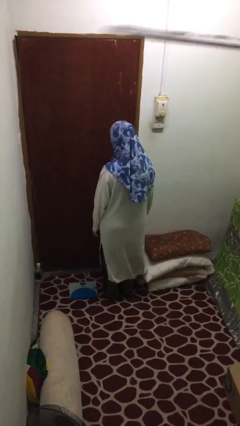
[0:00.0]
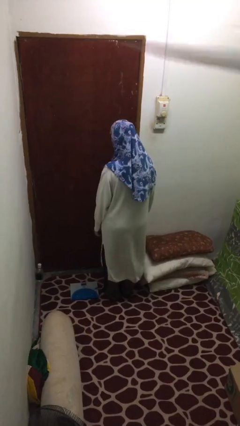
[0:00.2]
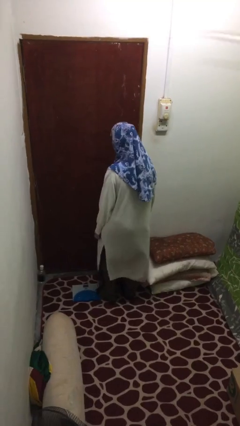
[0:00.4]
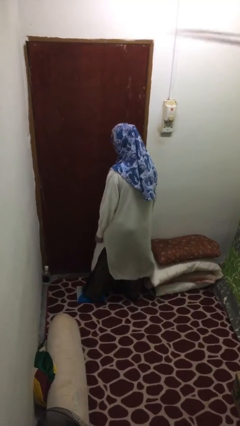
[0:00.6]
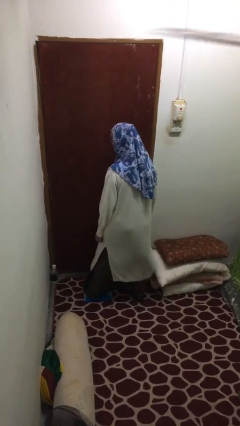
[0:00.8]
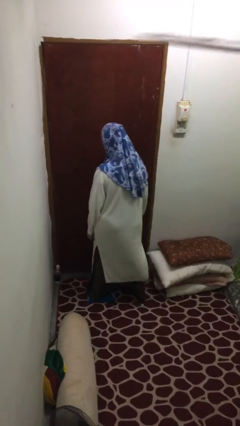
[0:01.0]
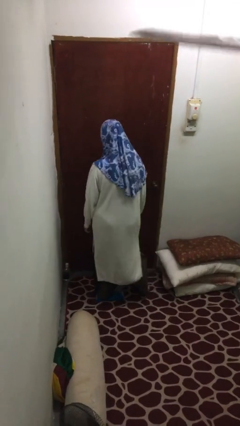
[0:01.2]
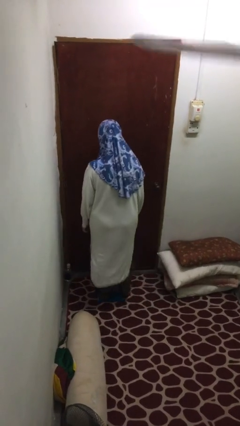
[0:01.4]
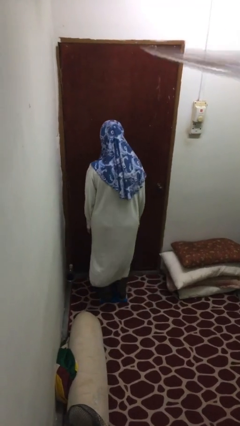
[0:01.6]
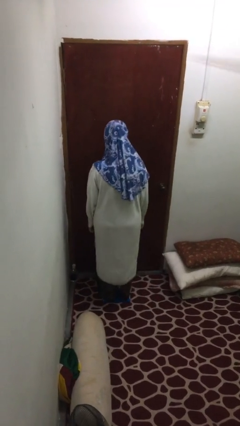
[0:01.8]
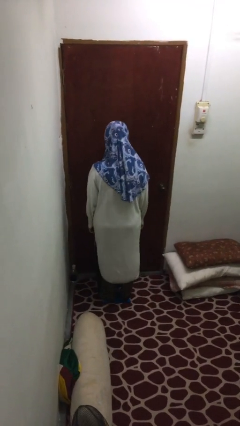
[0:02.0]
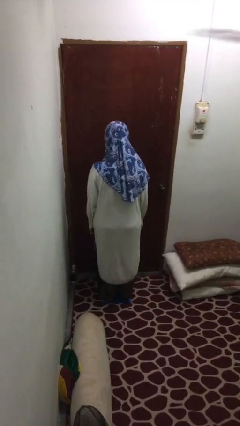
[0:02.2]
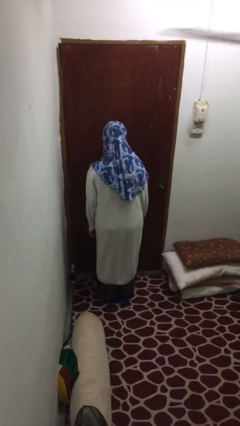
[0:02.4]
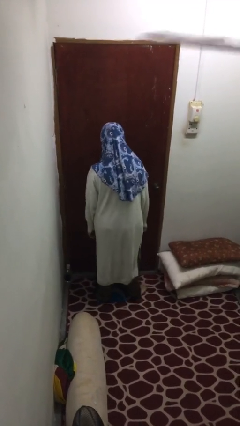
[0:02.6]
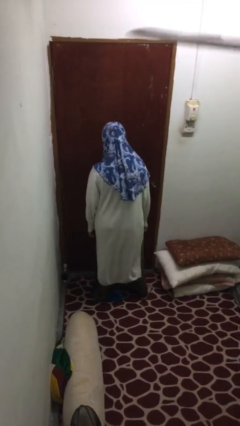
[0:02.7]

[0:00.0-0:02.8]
person uses bodyweight scale

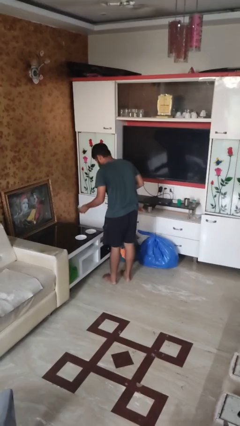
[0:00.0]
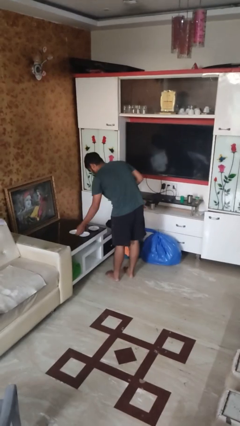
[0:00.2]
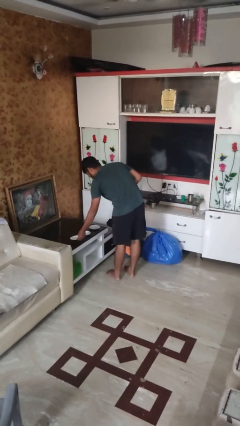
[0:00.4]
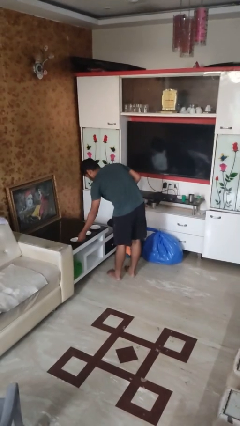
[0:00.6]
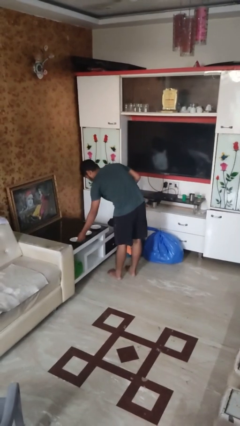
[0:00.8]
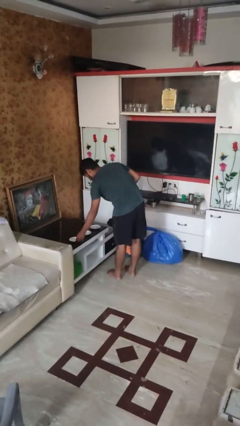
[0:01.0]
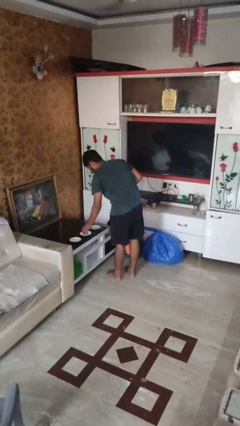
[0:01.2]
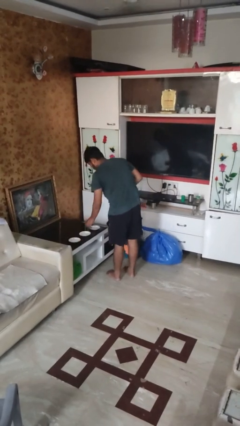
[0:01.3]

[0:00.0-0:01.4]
person sets table

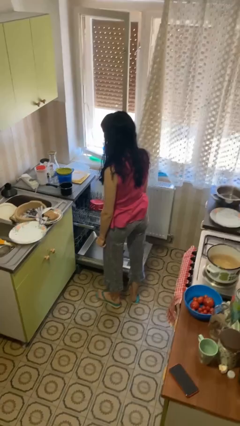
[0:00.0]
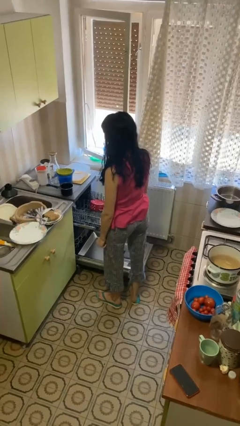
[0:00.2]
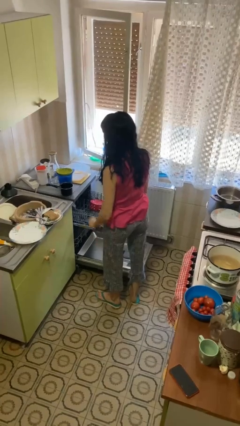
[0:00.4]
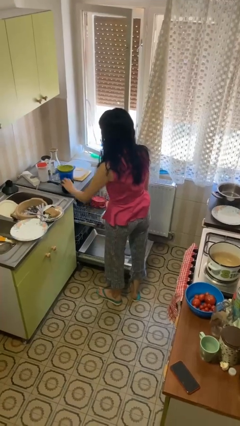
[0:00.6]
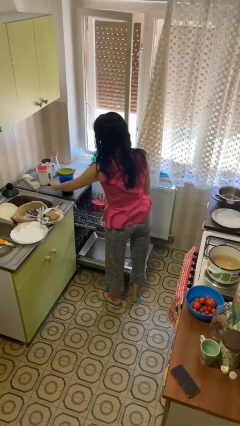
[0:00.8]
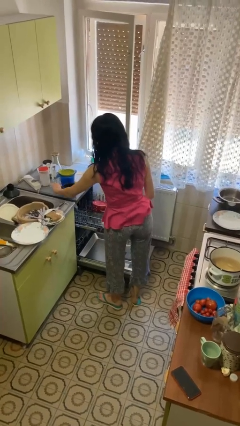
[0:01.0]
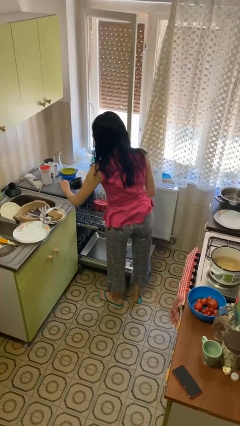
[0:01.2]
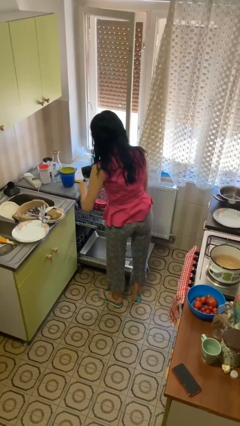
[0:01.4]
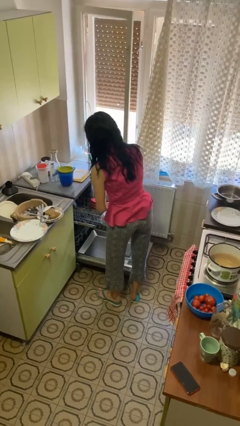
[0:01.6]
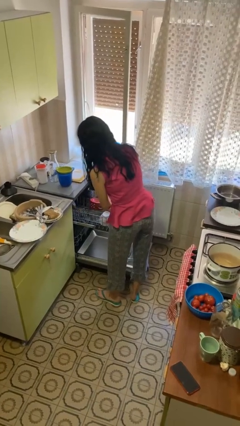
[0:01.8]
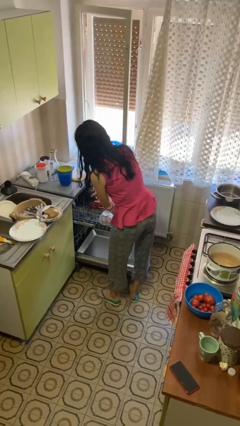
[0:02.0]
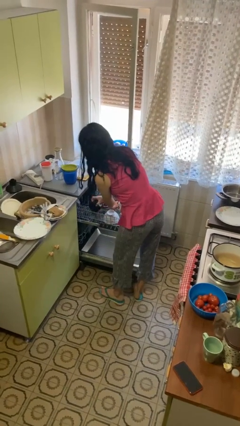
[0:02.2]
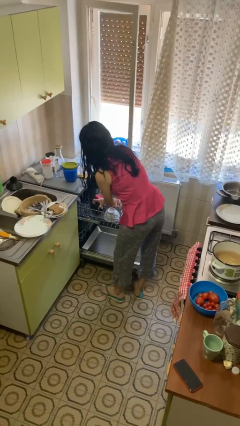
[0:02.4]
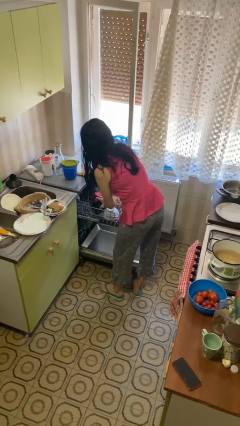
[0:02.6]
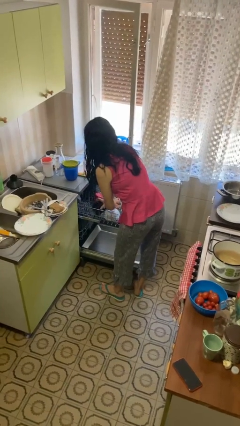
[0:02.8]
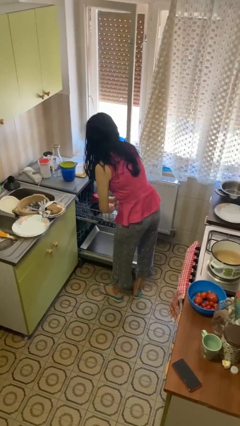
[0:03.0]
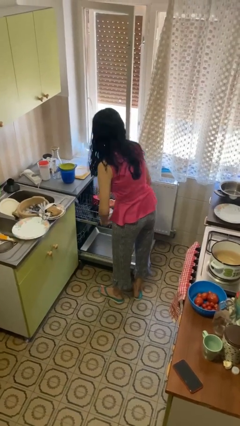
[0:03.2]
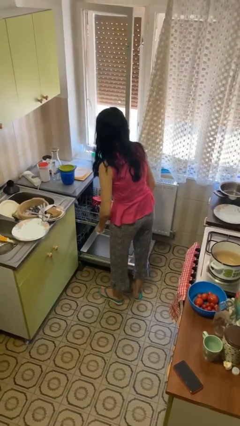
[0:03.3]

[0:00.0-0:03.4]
person loads dishwasher

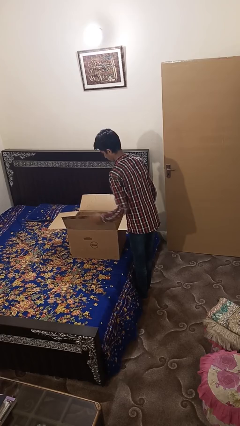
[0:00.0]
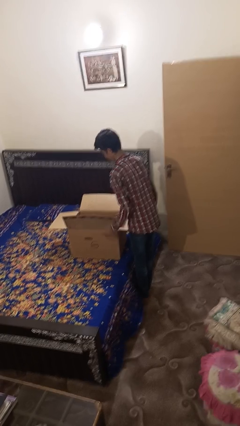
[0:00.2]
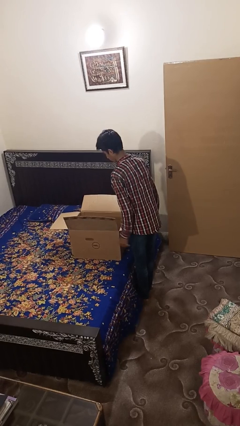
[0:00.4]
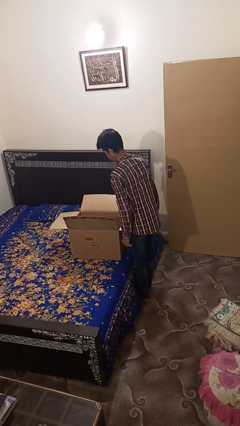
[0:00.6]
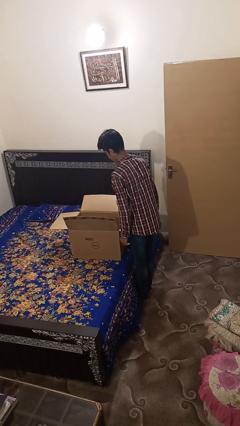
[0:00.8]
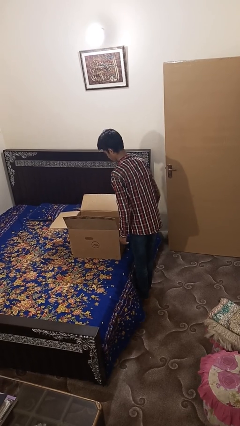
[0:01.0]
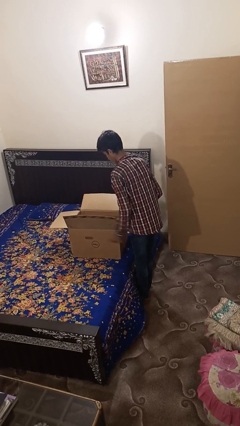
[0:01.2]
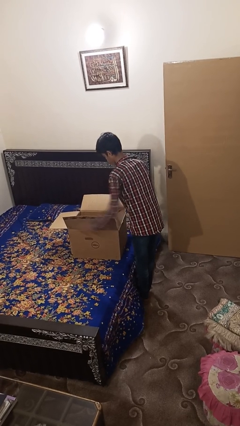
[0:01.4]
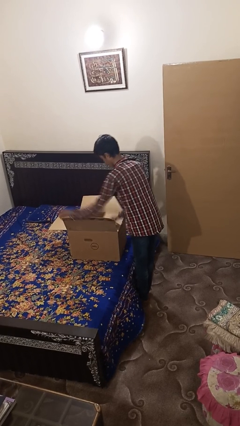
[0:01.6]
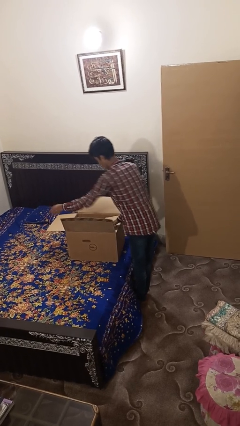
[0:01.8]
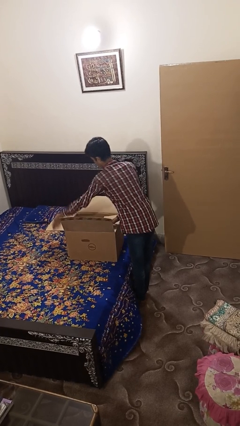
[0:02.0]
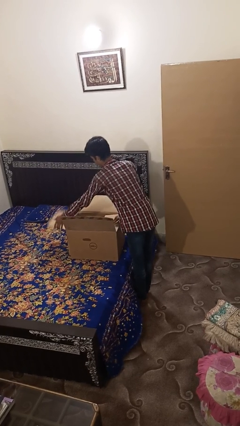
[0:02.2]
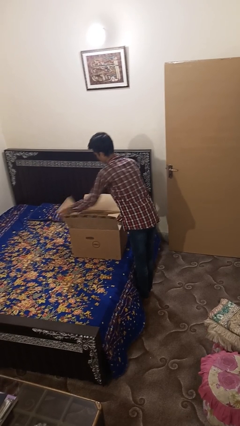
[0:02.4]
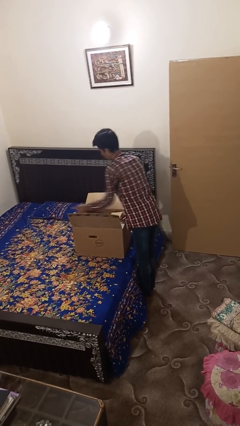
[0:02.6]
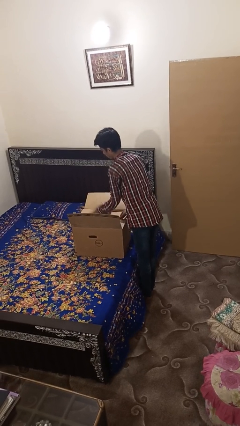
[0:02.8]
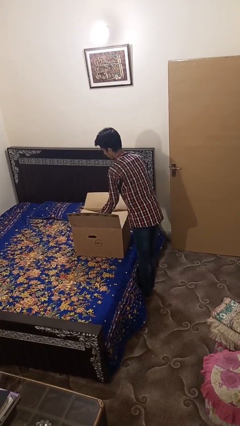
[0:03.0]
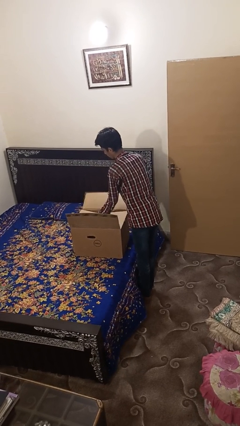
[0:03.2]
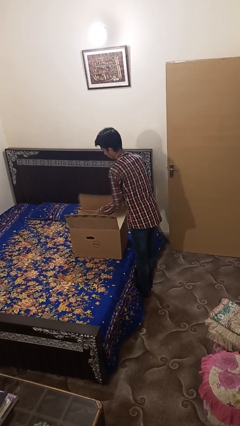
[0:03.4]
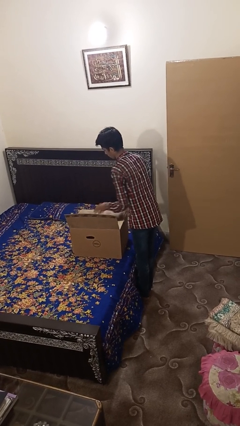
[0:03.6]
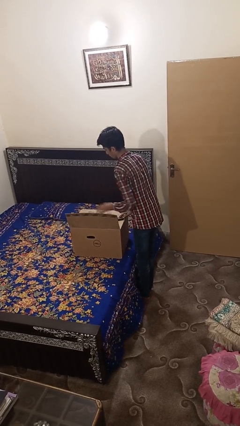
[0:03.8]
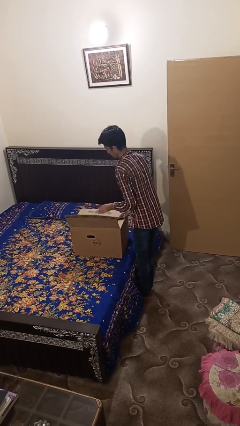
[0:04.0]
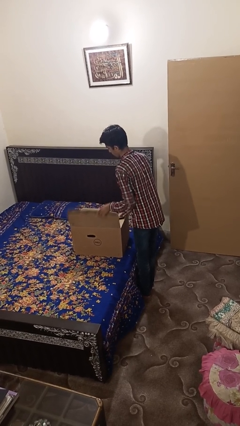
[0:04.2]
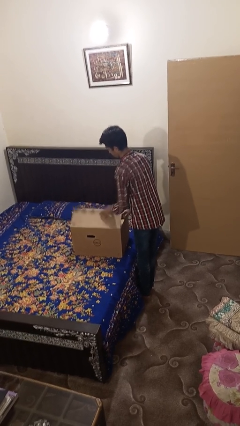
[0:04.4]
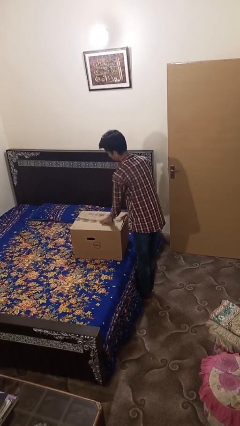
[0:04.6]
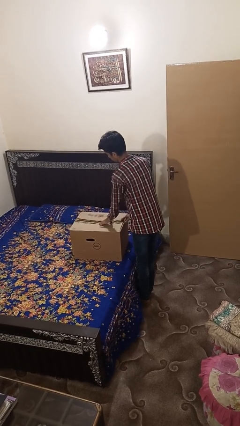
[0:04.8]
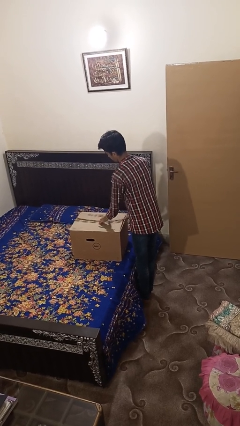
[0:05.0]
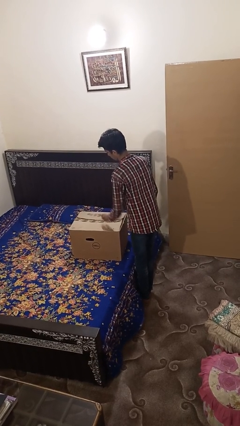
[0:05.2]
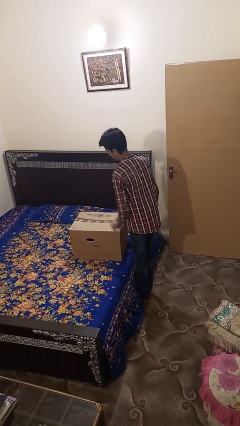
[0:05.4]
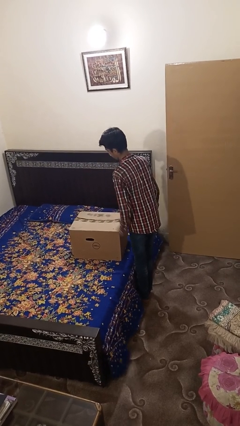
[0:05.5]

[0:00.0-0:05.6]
person closes box

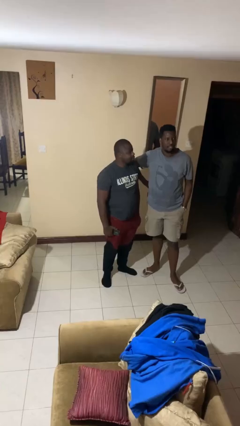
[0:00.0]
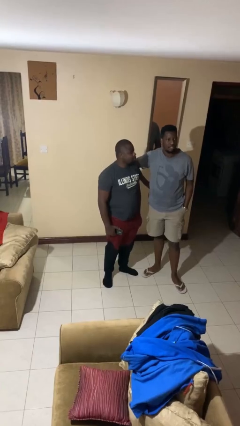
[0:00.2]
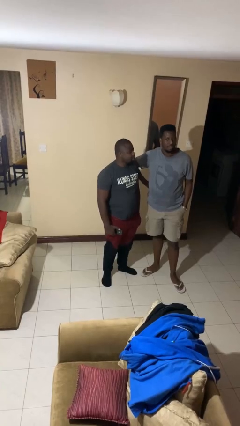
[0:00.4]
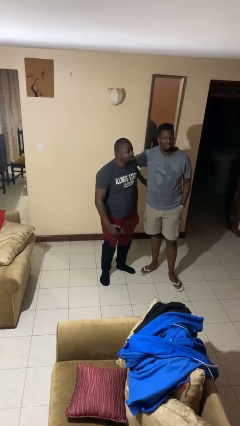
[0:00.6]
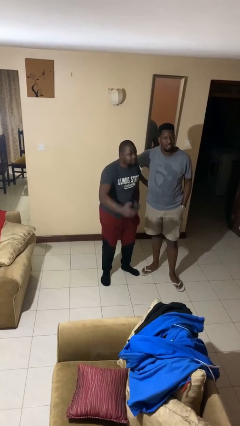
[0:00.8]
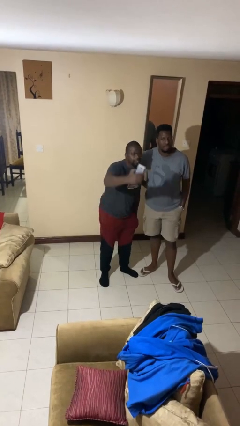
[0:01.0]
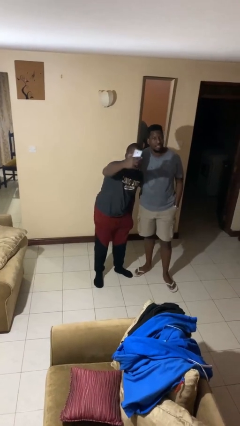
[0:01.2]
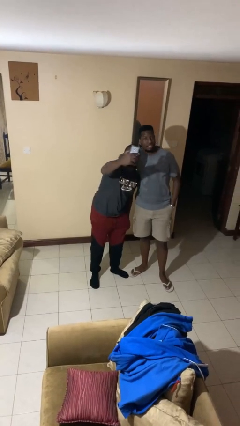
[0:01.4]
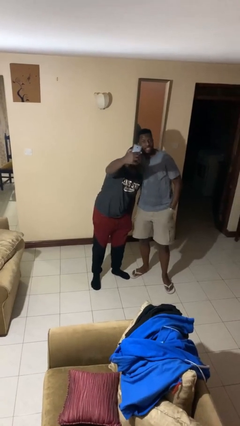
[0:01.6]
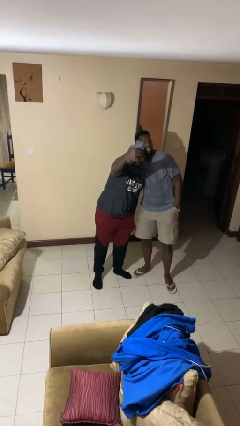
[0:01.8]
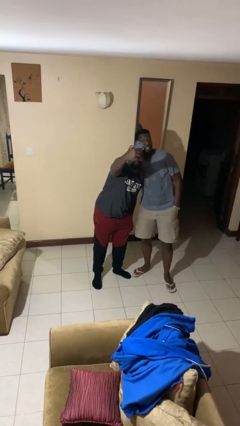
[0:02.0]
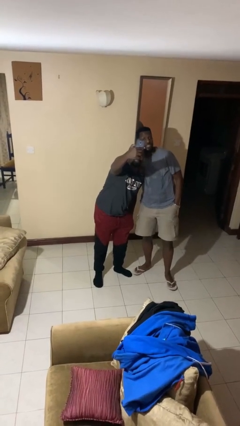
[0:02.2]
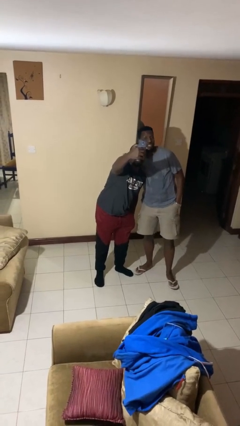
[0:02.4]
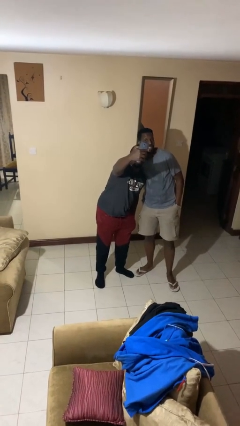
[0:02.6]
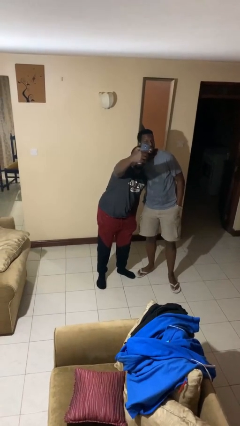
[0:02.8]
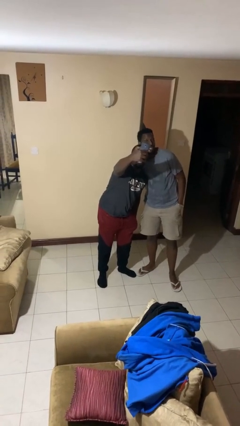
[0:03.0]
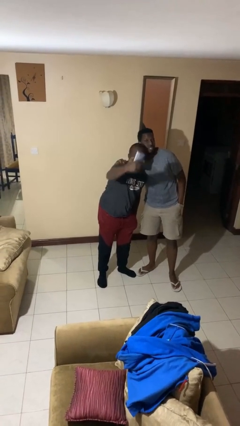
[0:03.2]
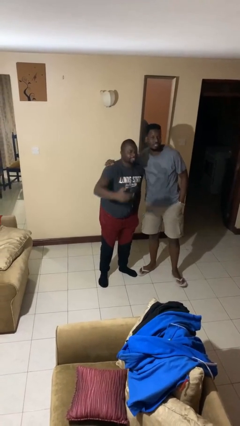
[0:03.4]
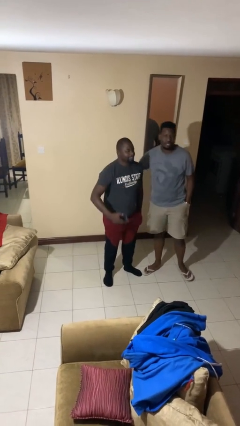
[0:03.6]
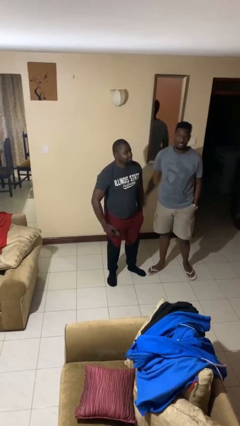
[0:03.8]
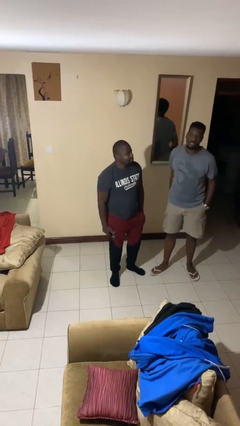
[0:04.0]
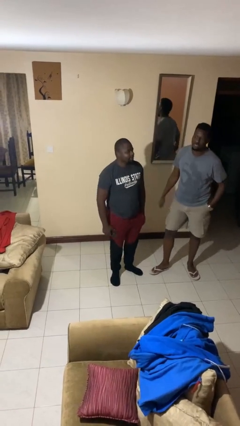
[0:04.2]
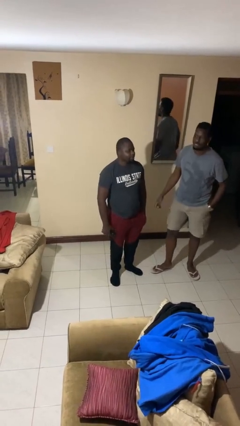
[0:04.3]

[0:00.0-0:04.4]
person takes selfie with person
